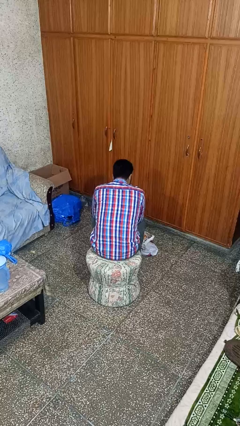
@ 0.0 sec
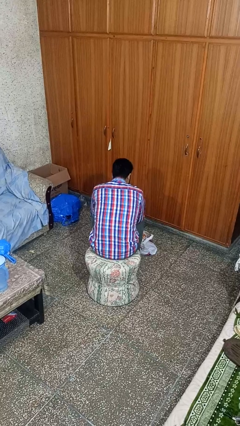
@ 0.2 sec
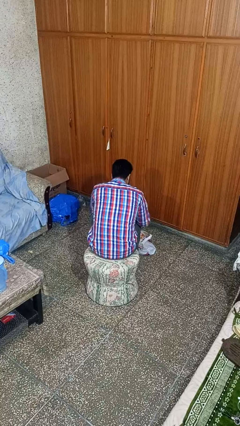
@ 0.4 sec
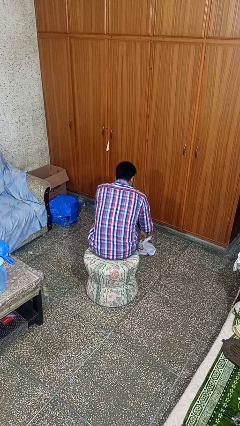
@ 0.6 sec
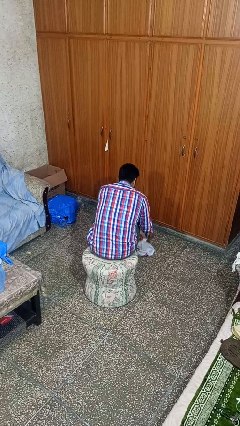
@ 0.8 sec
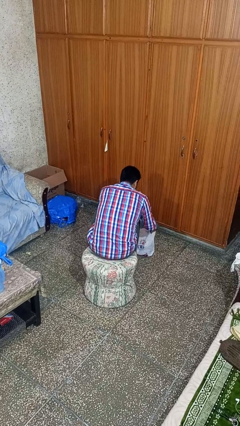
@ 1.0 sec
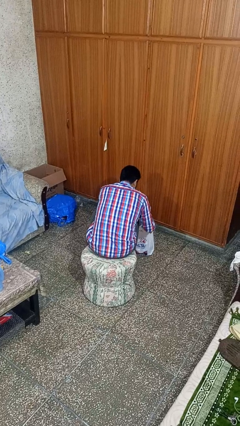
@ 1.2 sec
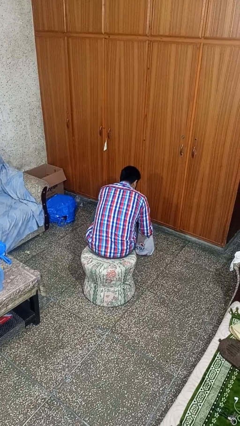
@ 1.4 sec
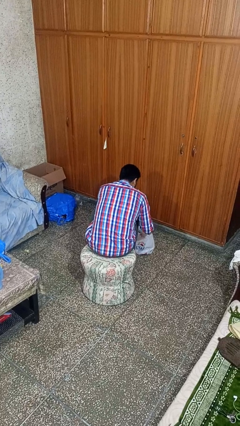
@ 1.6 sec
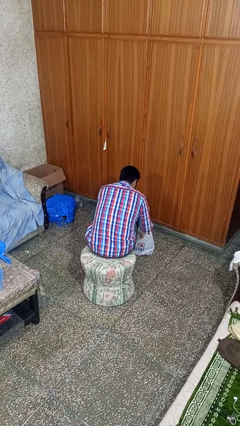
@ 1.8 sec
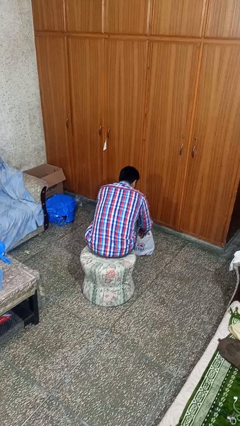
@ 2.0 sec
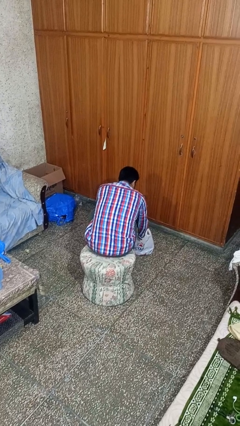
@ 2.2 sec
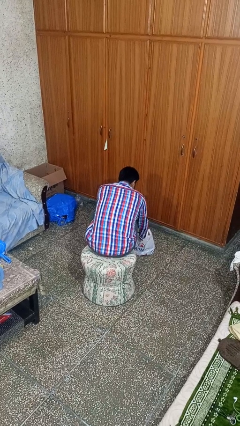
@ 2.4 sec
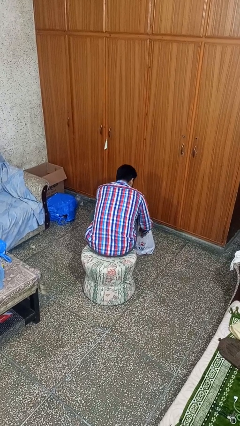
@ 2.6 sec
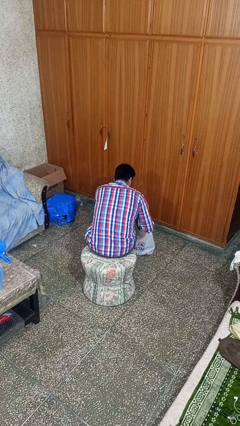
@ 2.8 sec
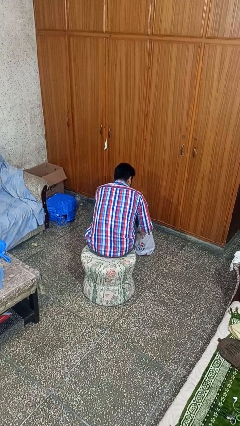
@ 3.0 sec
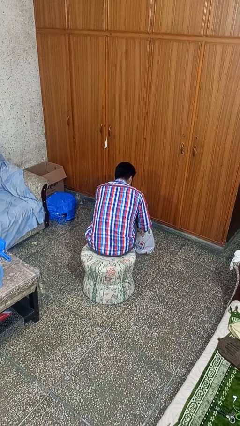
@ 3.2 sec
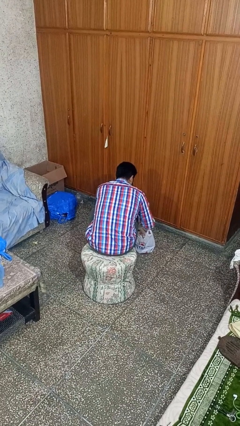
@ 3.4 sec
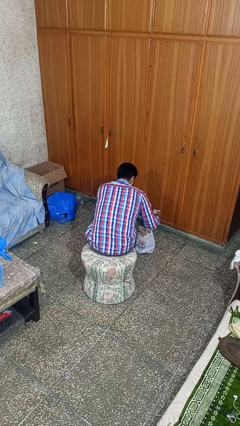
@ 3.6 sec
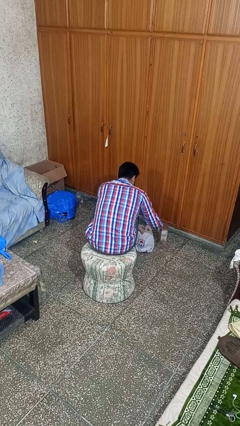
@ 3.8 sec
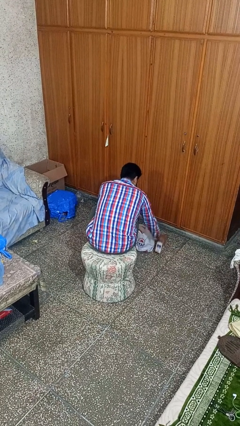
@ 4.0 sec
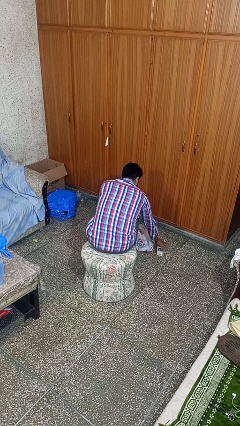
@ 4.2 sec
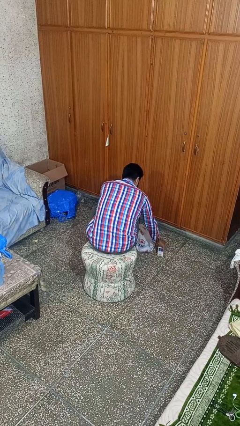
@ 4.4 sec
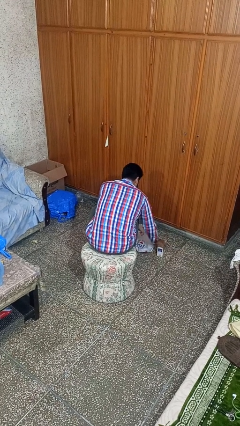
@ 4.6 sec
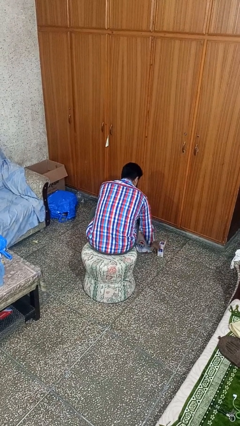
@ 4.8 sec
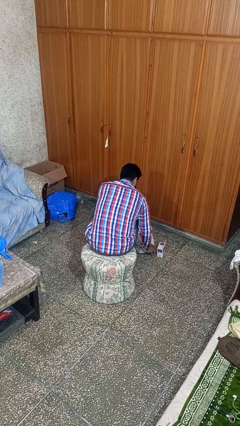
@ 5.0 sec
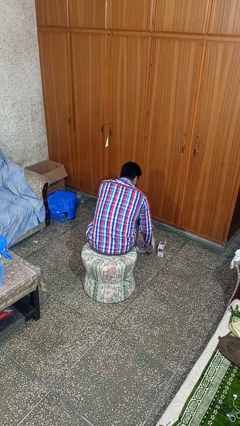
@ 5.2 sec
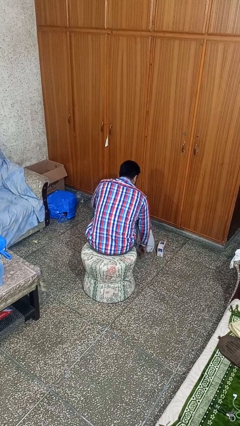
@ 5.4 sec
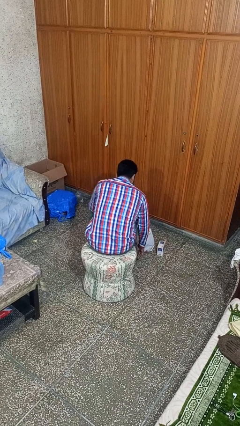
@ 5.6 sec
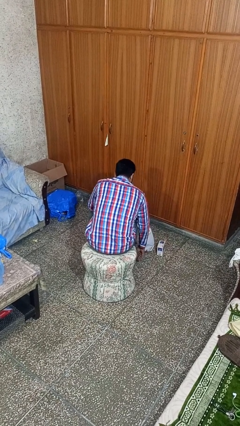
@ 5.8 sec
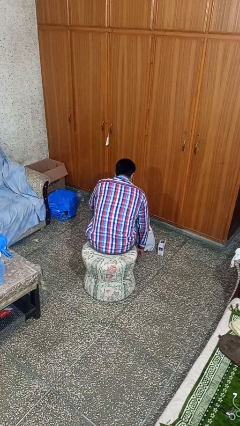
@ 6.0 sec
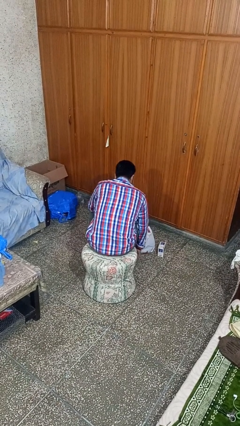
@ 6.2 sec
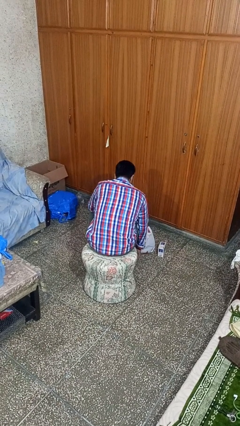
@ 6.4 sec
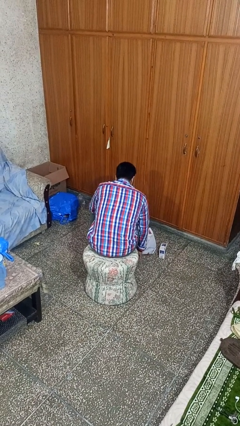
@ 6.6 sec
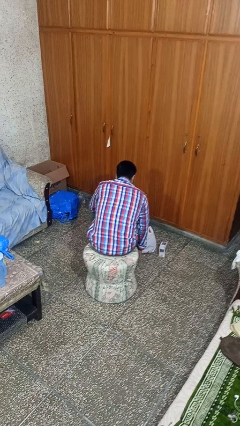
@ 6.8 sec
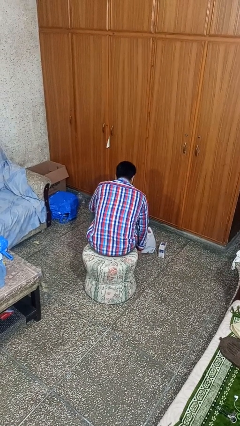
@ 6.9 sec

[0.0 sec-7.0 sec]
person takes object from bag

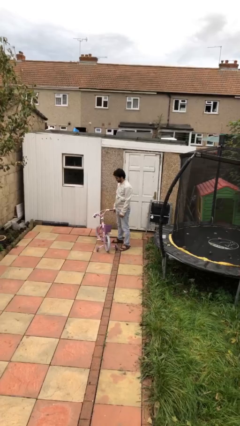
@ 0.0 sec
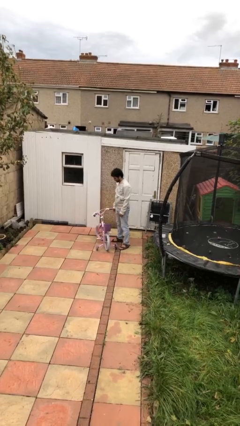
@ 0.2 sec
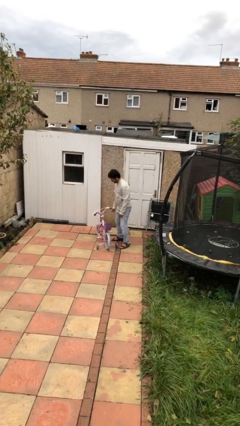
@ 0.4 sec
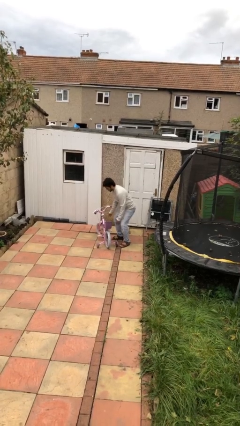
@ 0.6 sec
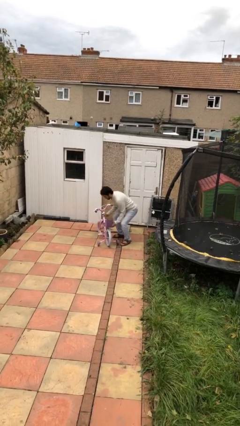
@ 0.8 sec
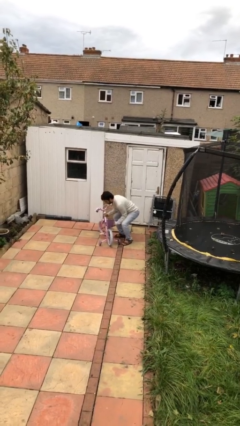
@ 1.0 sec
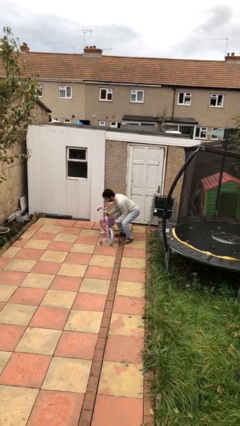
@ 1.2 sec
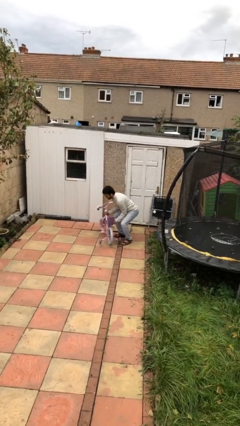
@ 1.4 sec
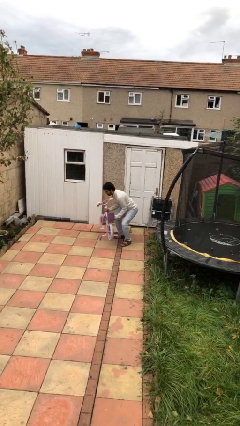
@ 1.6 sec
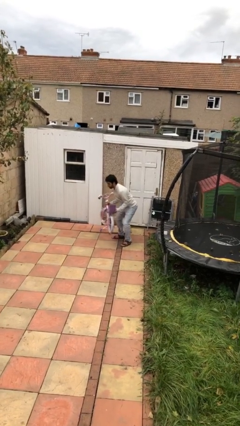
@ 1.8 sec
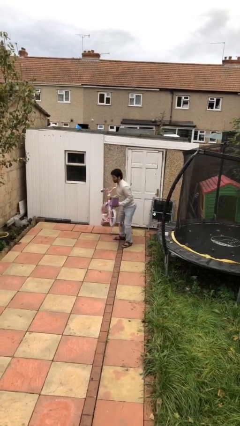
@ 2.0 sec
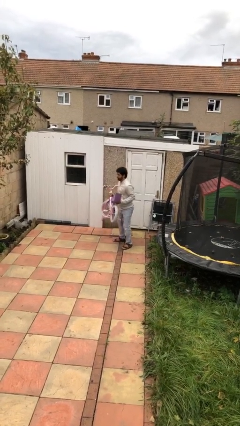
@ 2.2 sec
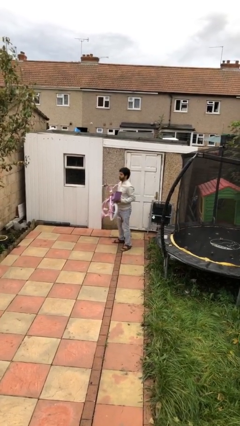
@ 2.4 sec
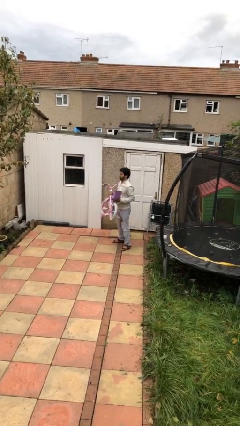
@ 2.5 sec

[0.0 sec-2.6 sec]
person picks up object from floor

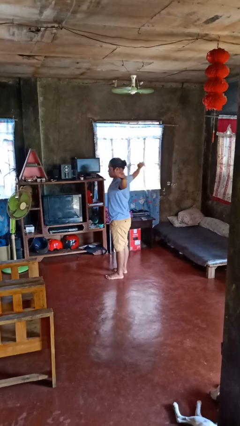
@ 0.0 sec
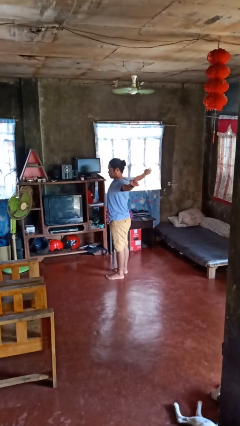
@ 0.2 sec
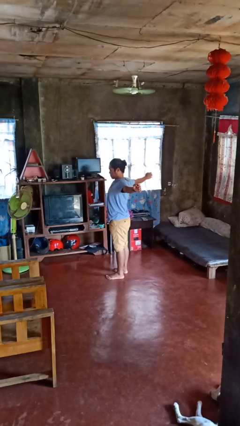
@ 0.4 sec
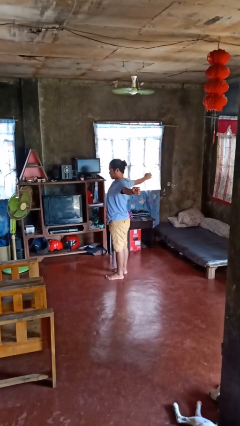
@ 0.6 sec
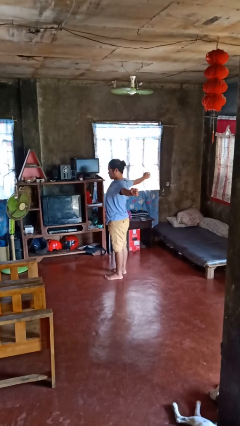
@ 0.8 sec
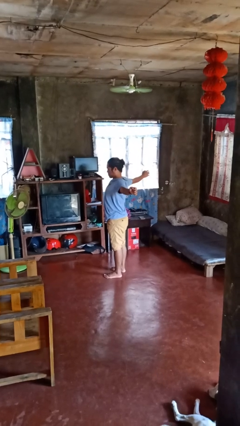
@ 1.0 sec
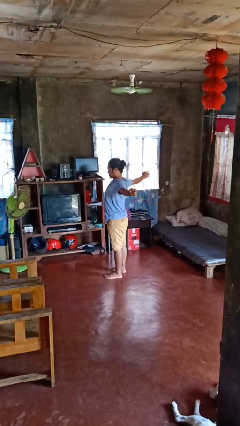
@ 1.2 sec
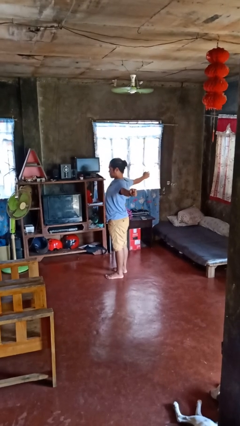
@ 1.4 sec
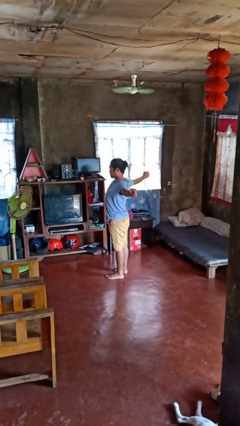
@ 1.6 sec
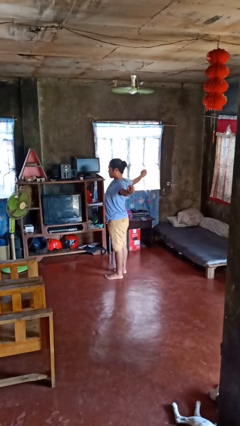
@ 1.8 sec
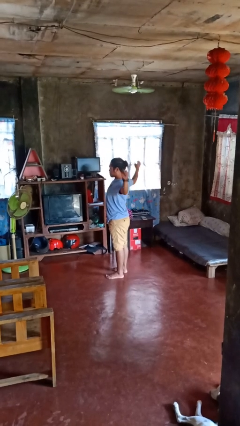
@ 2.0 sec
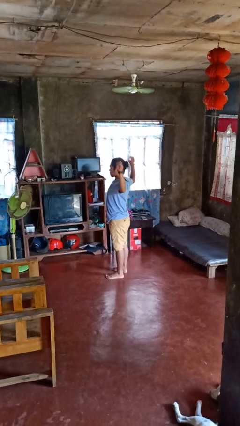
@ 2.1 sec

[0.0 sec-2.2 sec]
person stretches arms to side

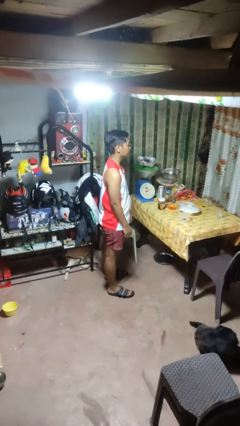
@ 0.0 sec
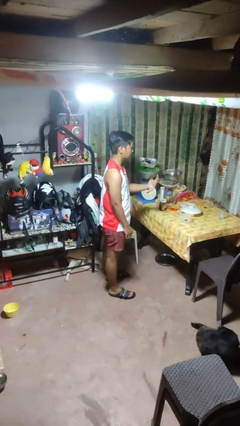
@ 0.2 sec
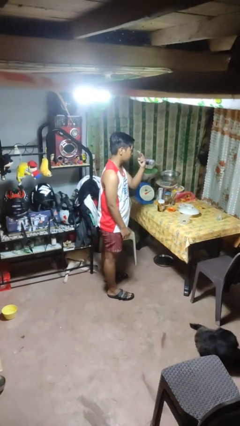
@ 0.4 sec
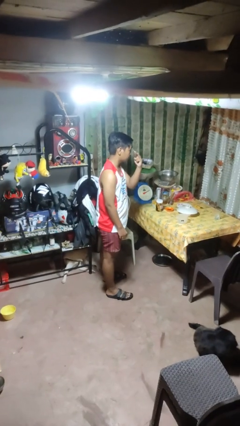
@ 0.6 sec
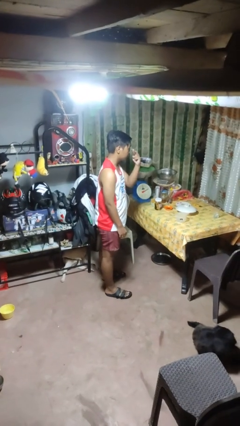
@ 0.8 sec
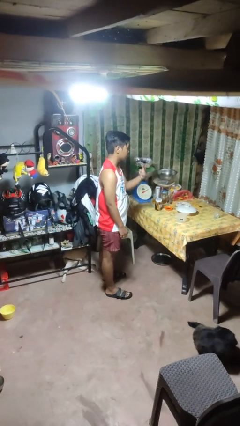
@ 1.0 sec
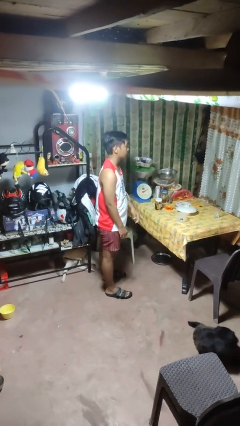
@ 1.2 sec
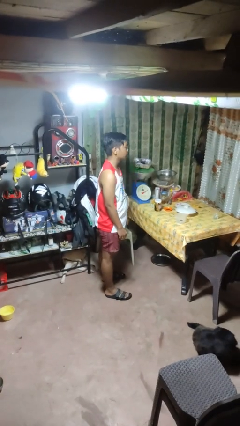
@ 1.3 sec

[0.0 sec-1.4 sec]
person gestures watch closely

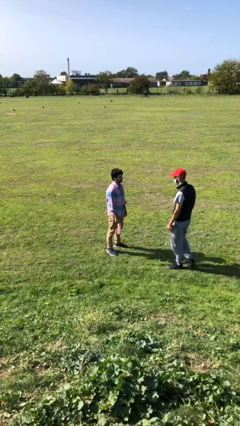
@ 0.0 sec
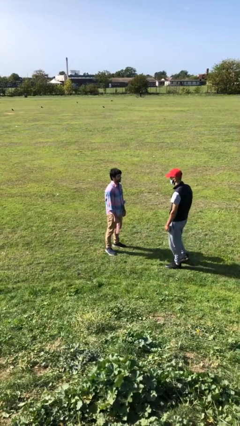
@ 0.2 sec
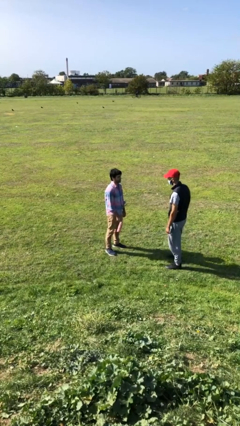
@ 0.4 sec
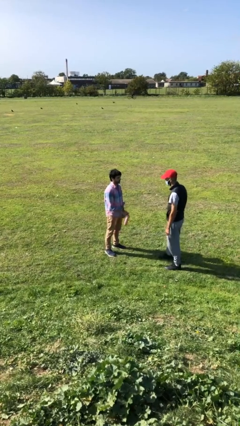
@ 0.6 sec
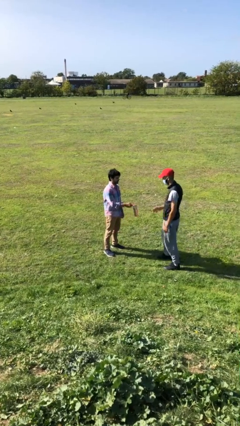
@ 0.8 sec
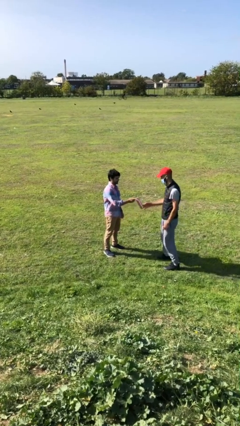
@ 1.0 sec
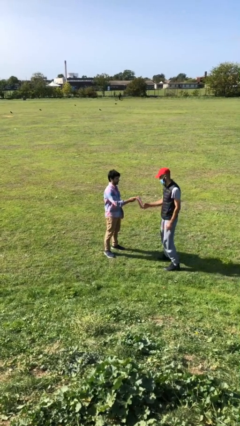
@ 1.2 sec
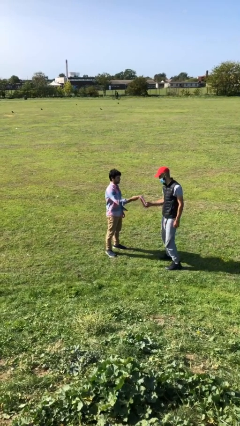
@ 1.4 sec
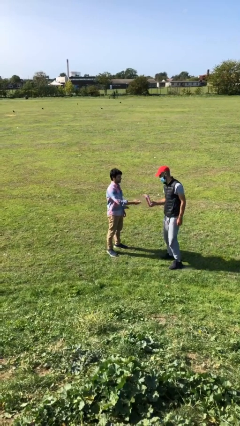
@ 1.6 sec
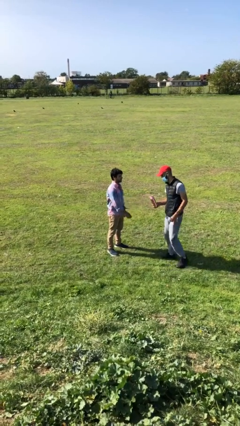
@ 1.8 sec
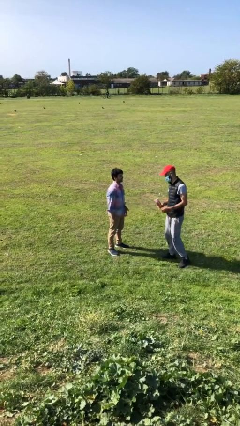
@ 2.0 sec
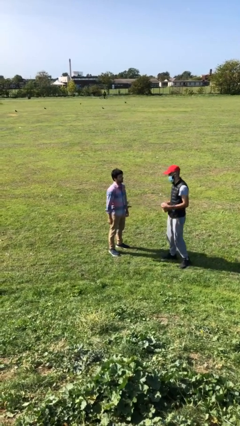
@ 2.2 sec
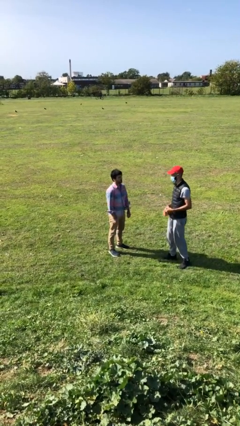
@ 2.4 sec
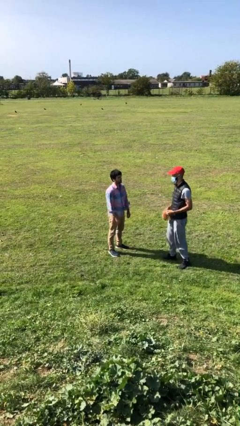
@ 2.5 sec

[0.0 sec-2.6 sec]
person transfers object to person

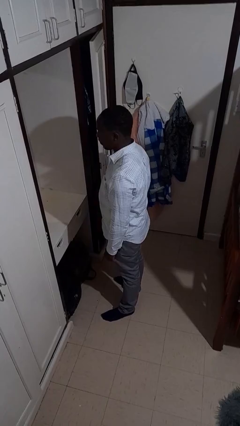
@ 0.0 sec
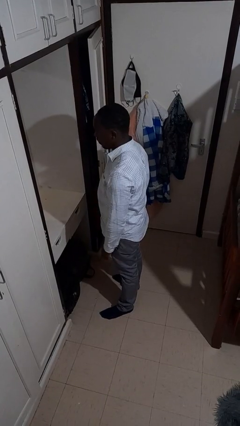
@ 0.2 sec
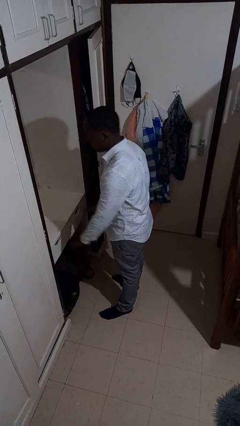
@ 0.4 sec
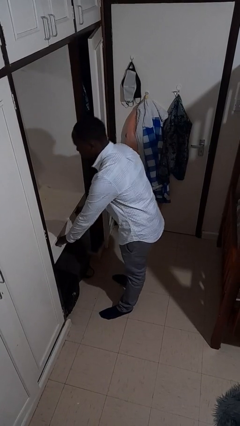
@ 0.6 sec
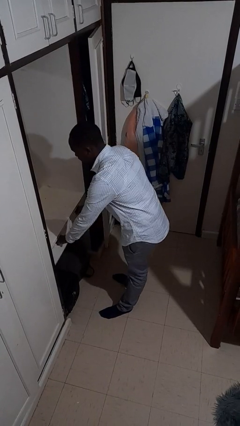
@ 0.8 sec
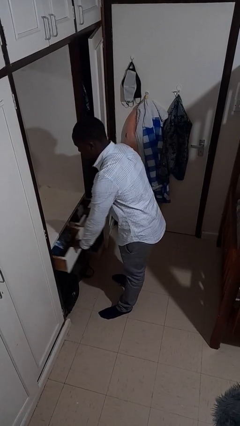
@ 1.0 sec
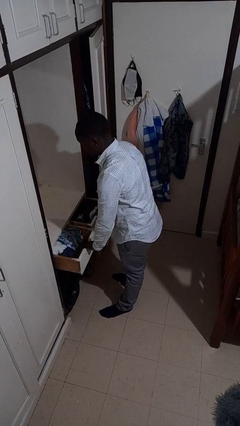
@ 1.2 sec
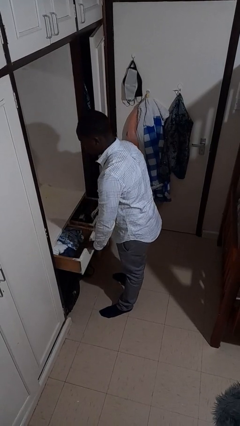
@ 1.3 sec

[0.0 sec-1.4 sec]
person opens dresser drawer
